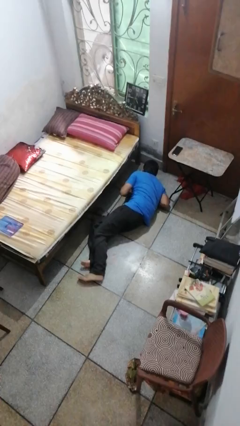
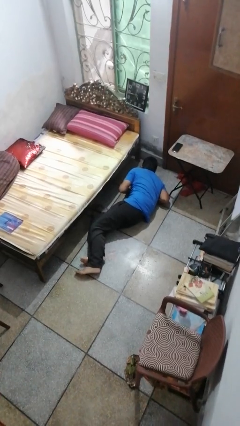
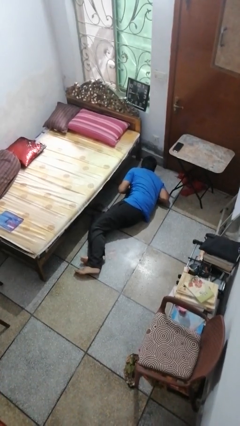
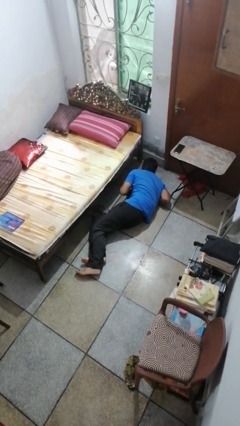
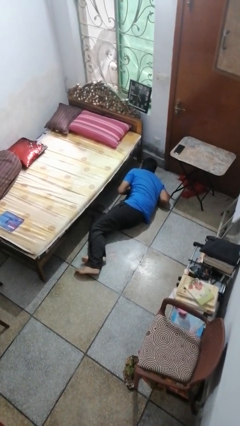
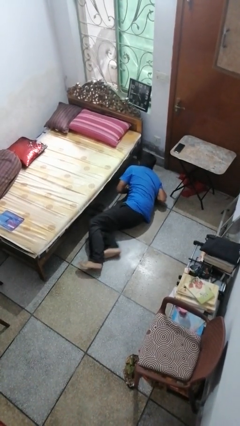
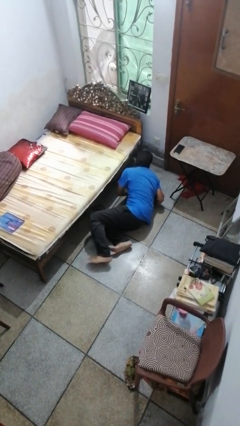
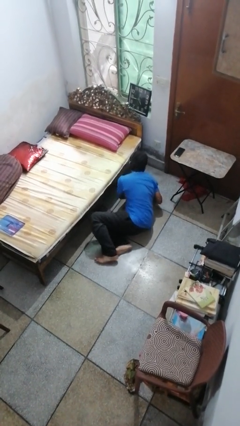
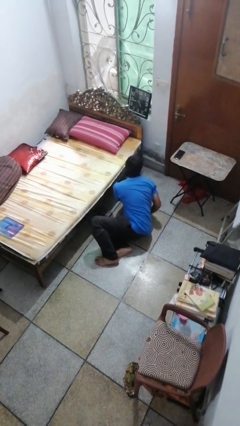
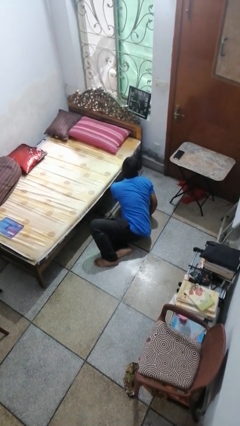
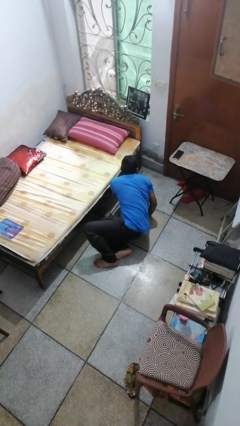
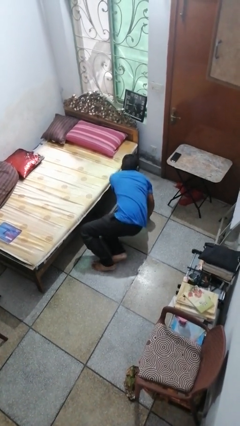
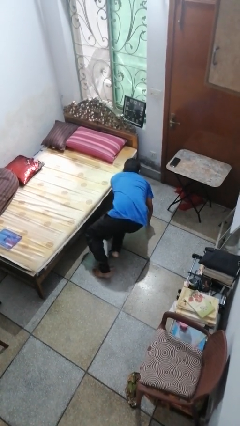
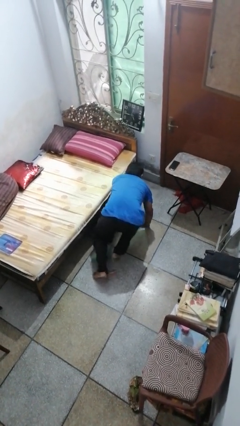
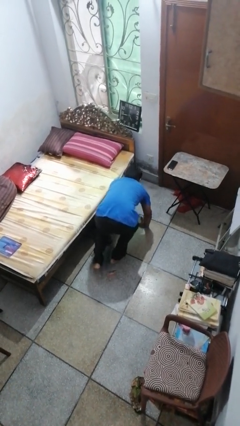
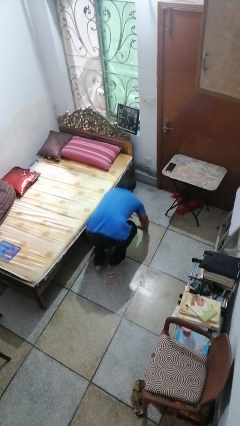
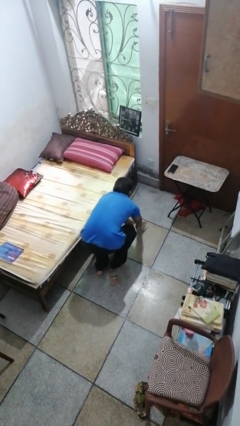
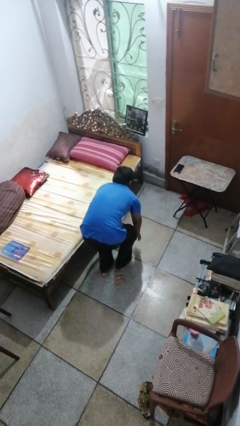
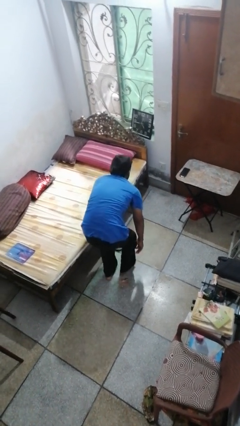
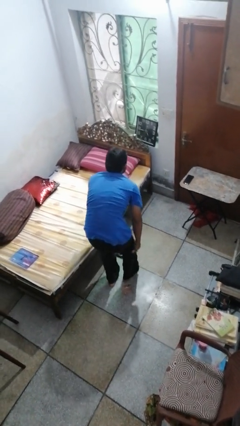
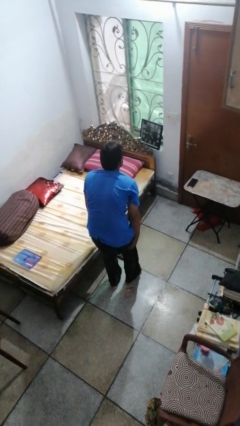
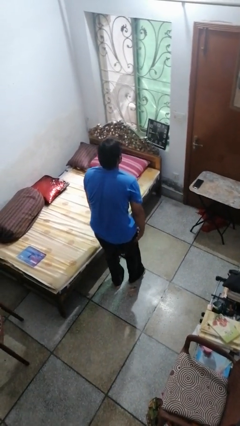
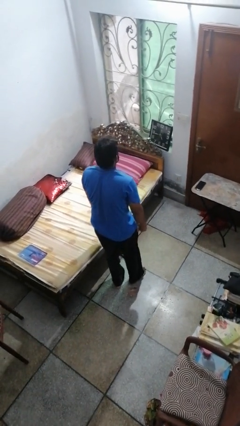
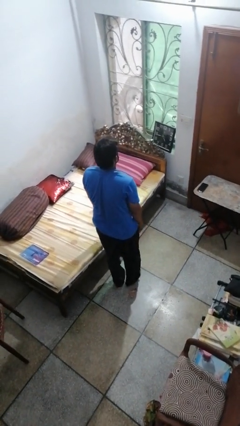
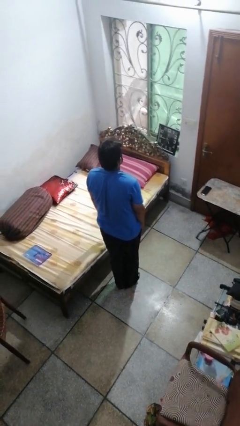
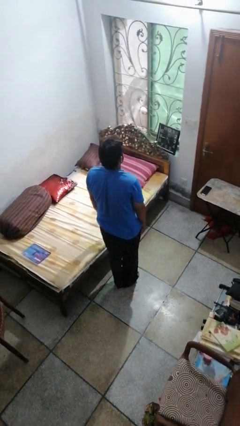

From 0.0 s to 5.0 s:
person stands up from floor

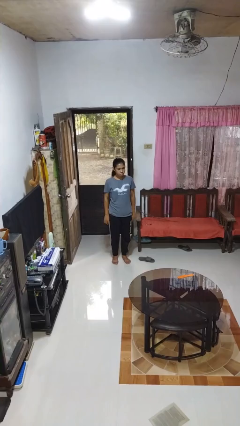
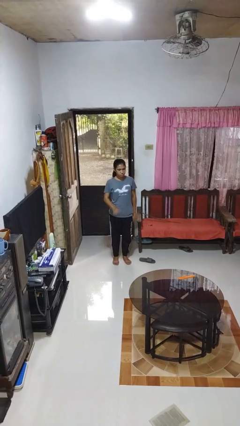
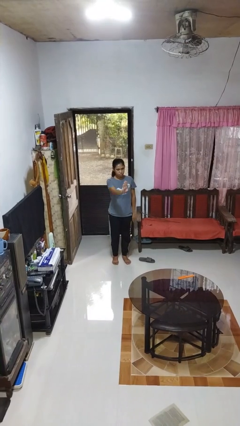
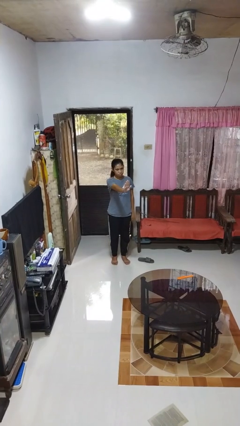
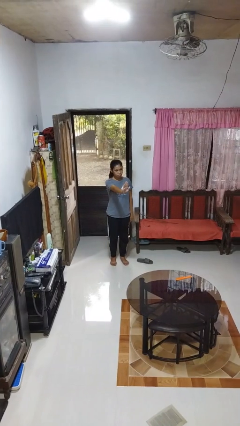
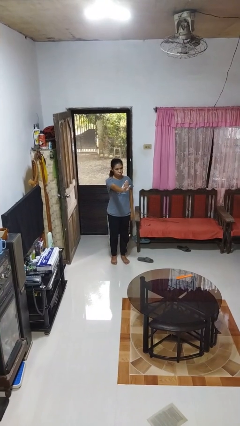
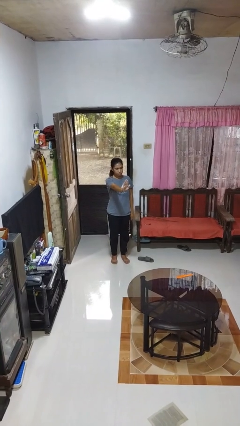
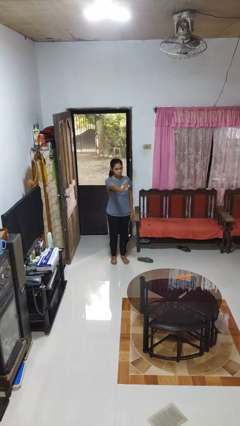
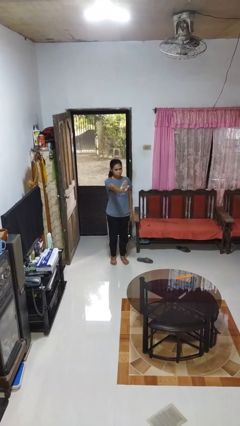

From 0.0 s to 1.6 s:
person gestures stop

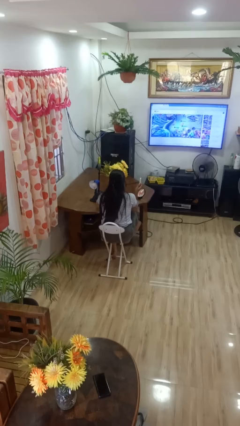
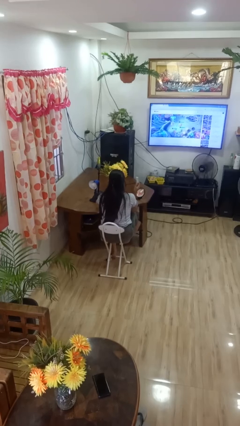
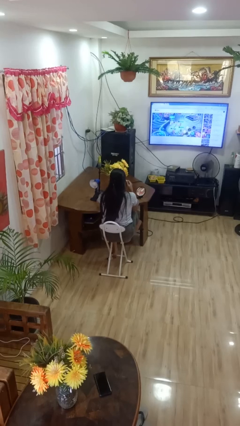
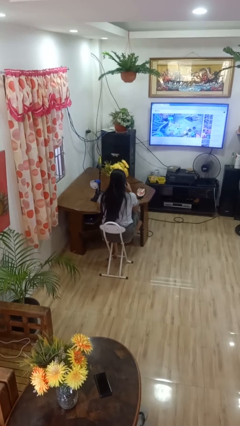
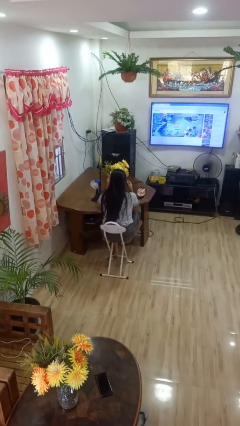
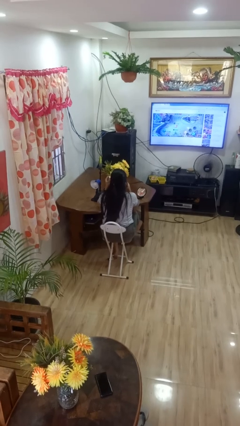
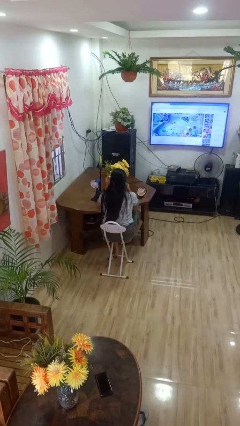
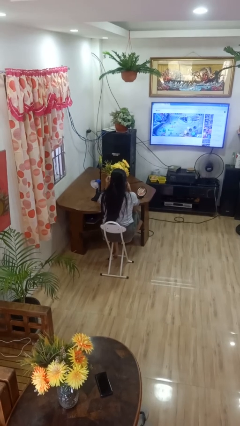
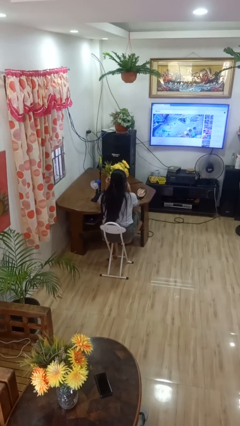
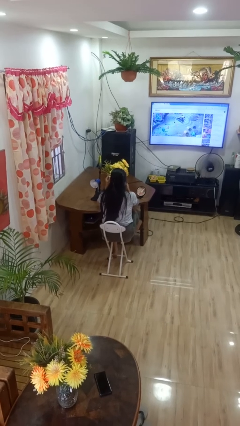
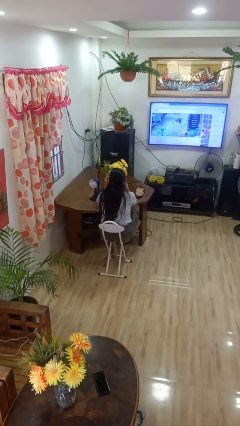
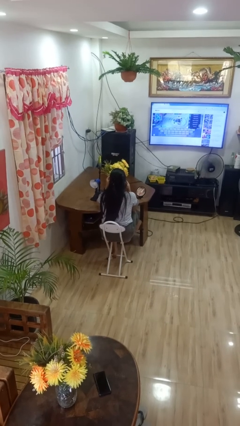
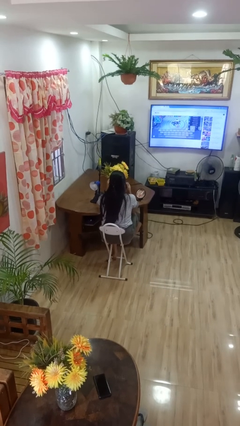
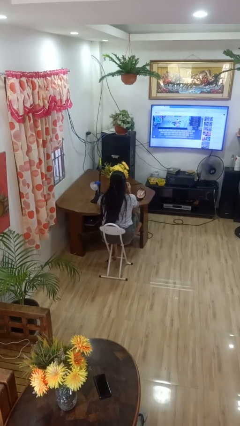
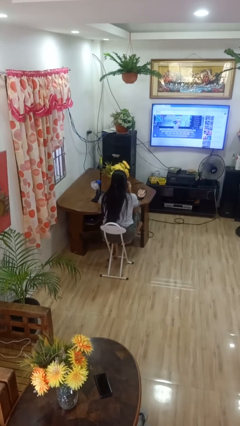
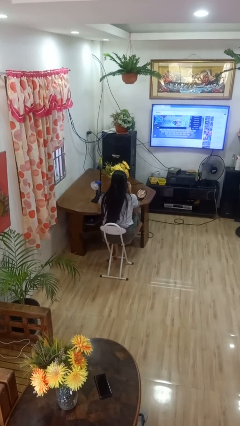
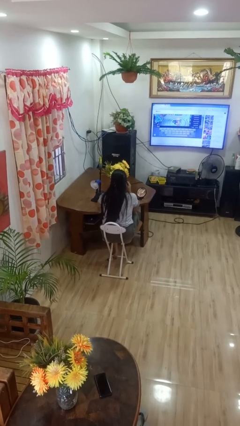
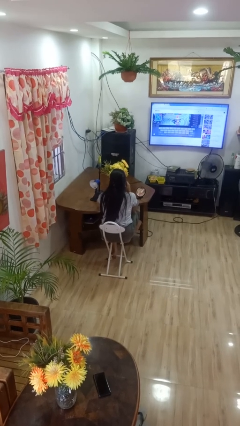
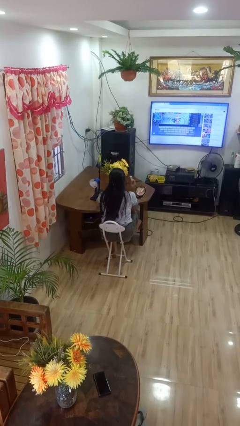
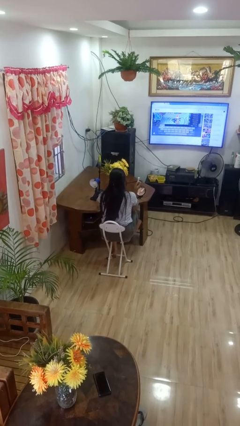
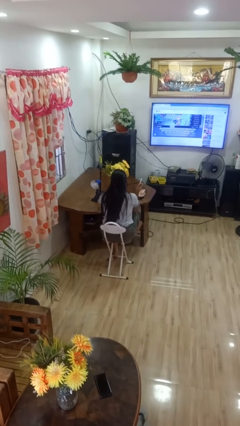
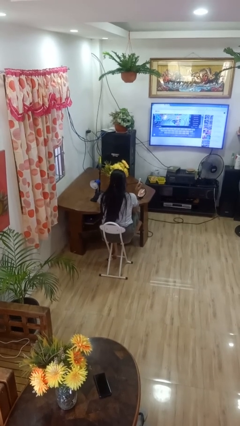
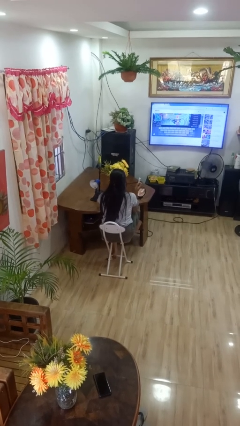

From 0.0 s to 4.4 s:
person applies lip makeup

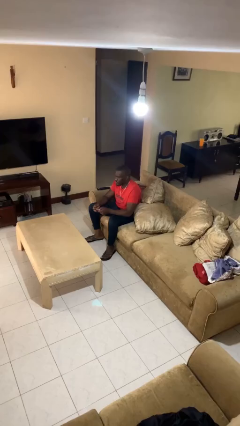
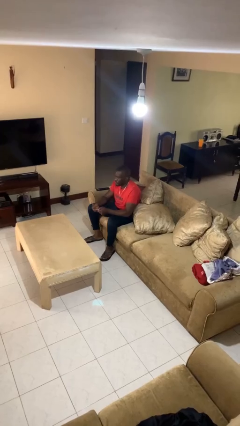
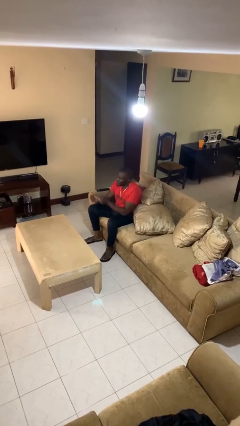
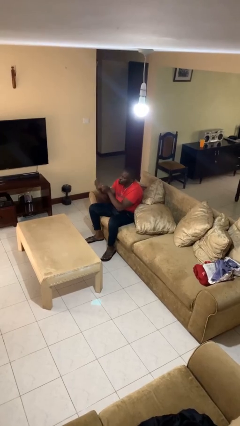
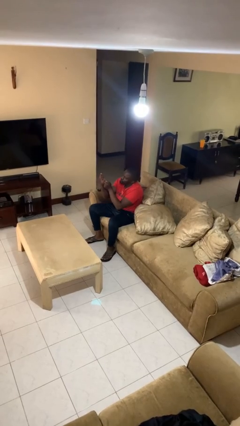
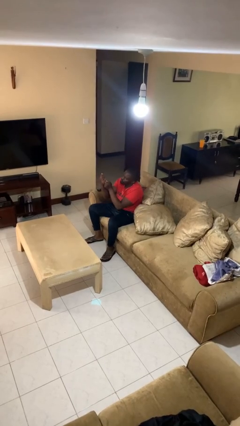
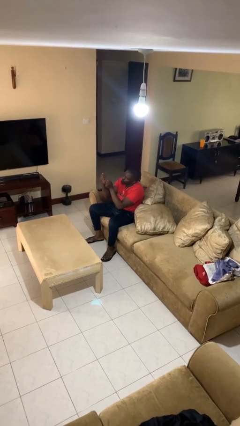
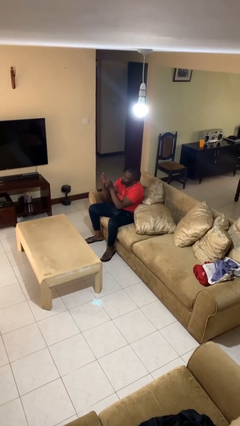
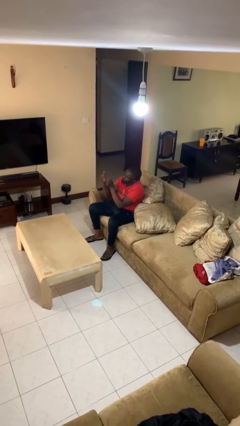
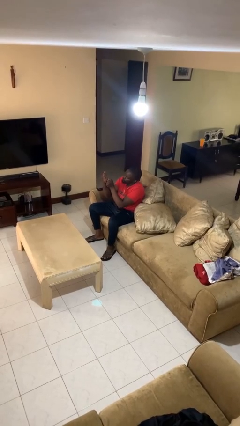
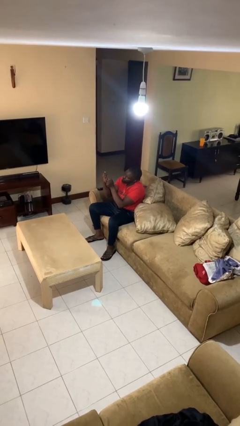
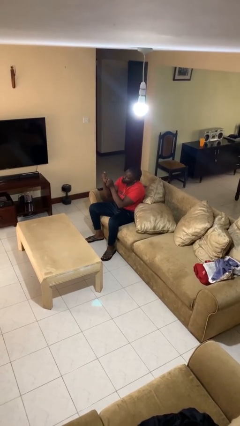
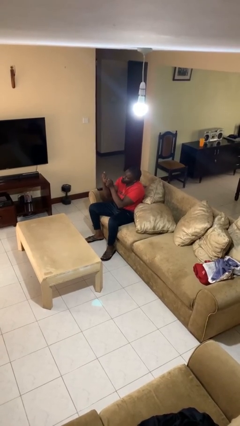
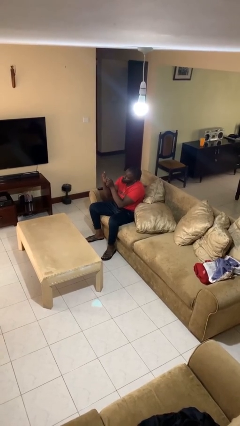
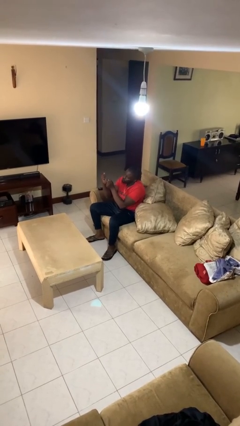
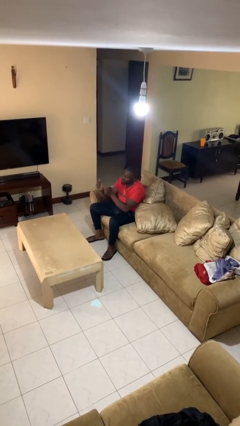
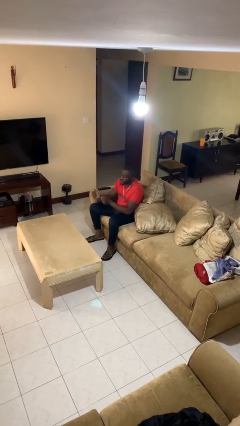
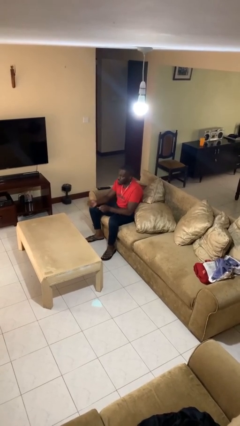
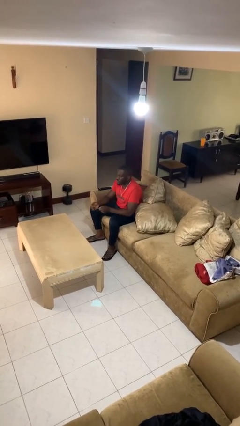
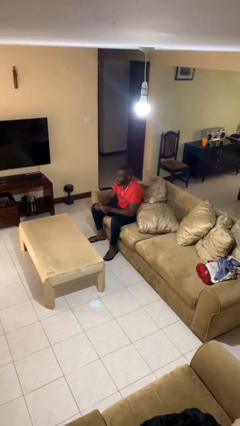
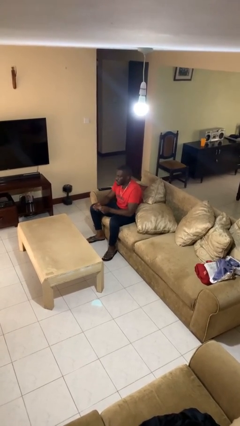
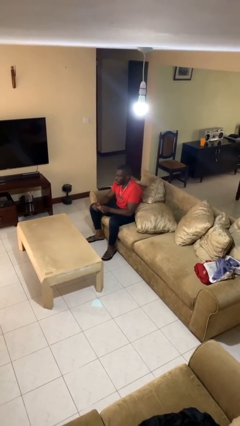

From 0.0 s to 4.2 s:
person clips fingernails

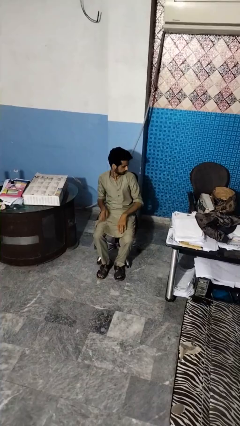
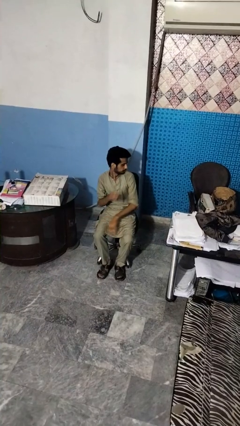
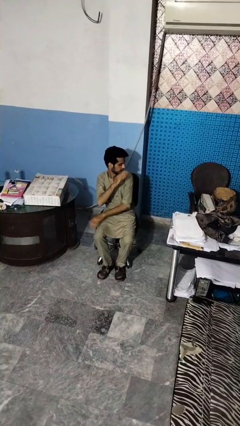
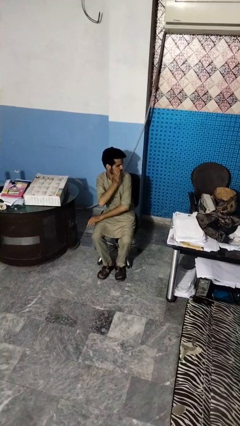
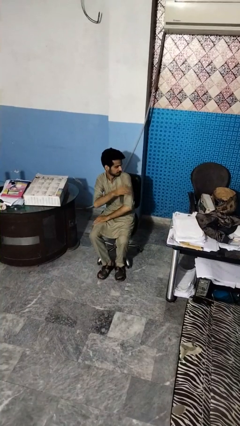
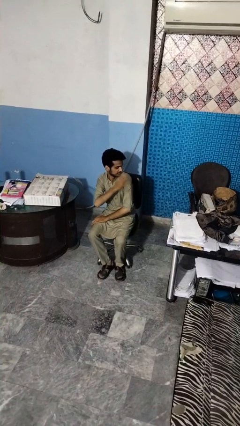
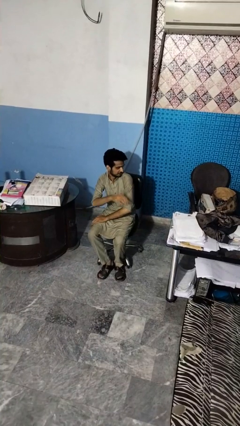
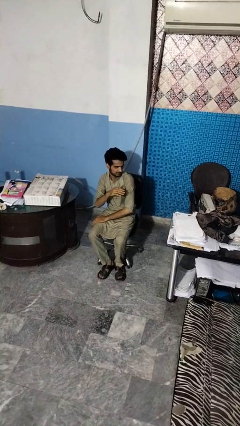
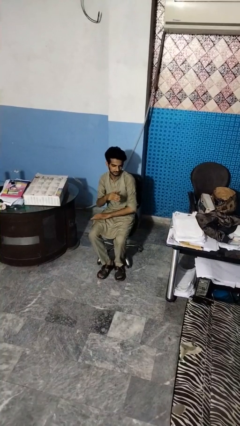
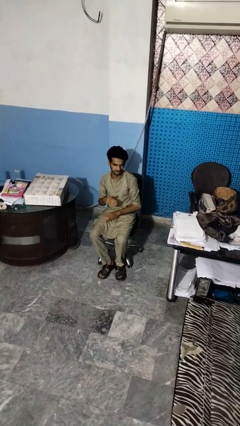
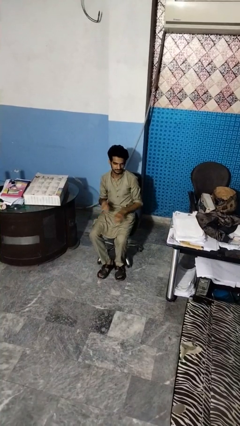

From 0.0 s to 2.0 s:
person swats bug

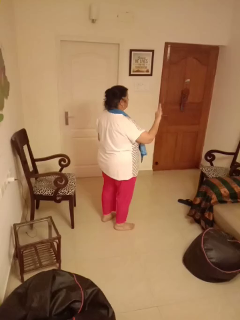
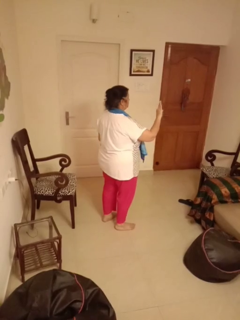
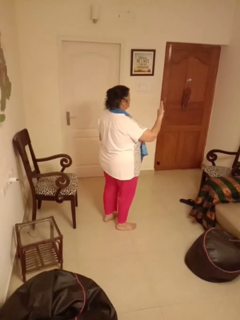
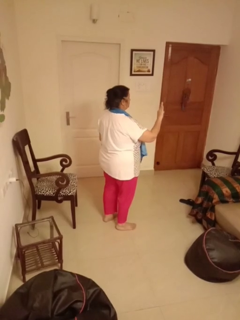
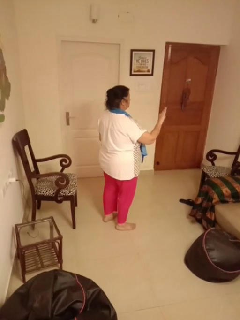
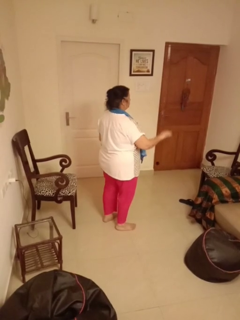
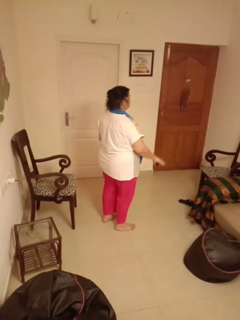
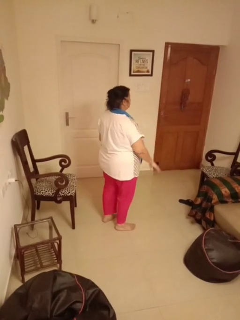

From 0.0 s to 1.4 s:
person gestures number three
